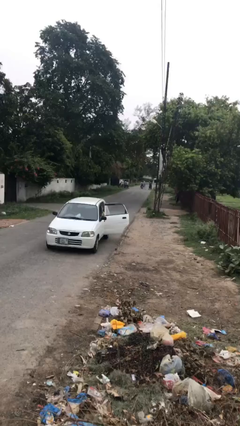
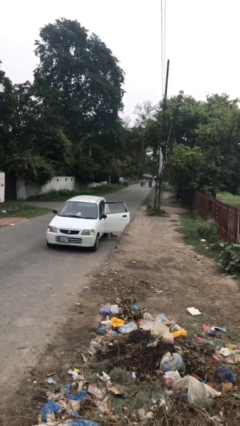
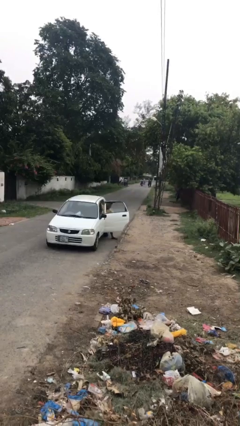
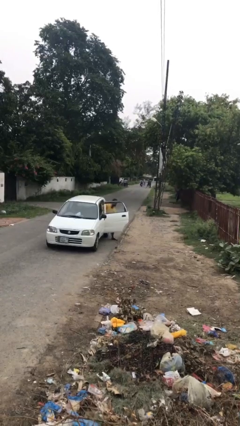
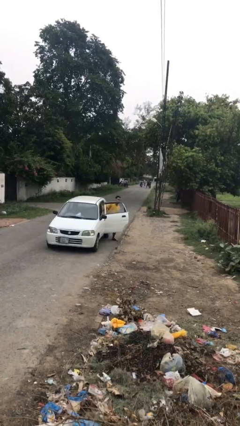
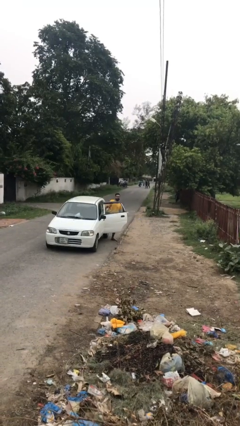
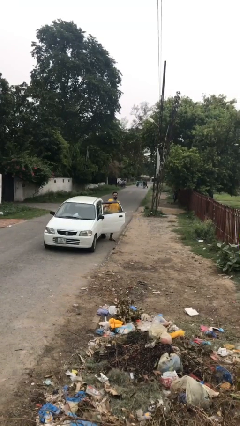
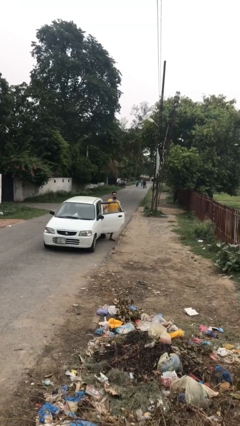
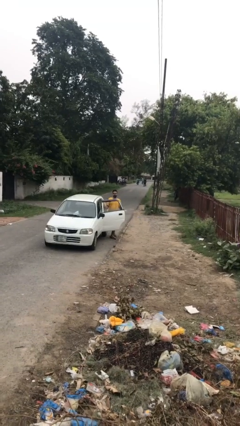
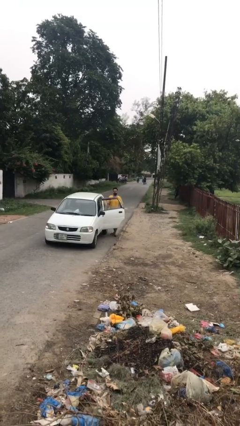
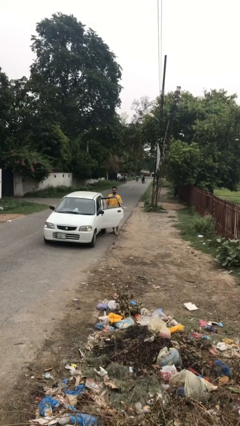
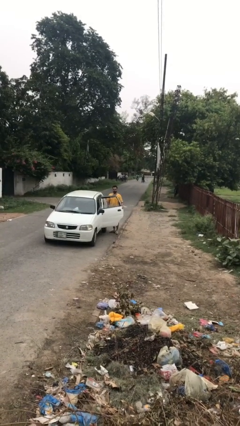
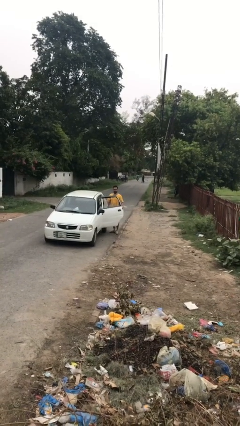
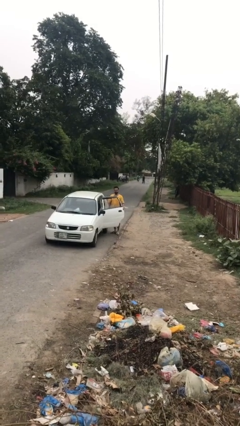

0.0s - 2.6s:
person exits car

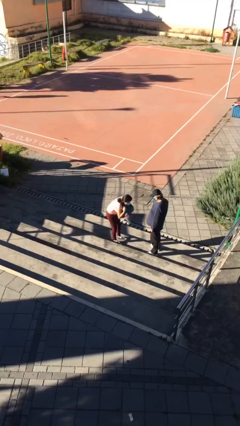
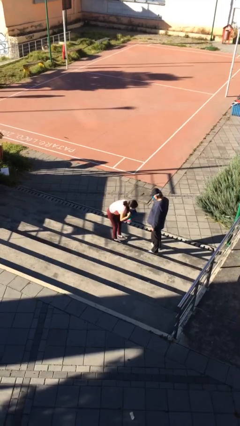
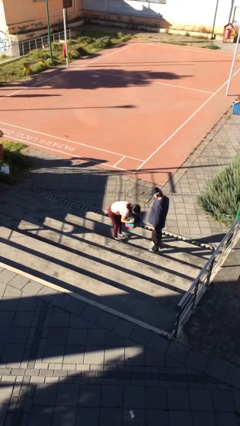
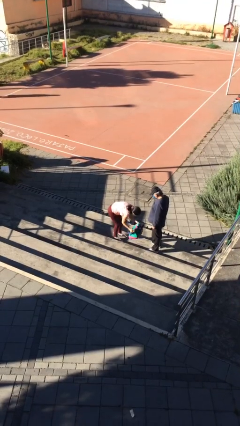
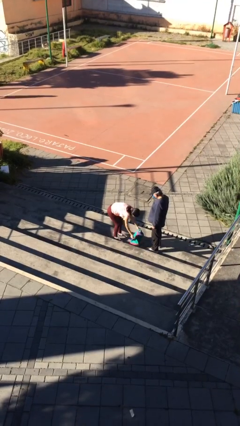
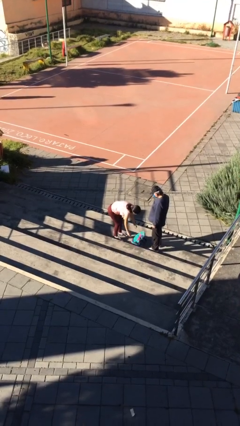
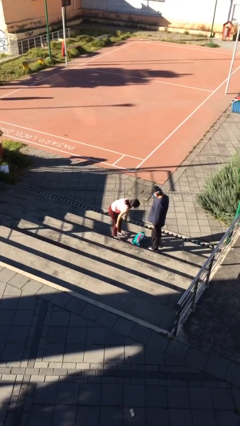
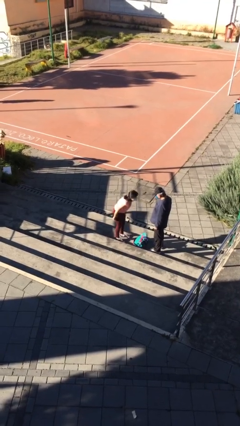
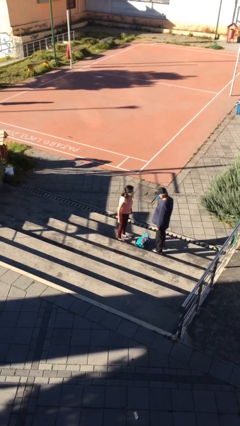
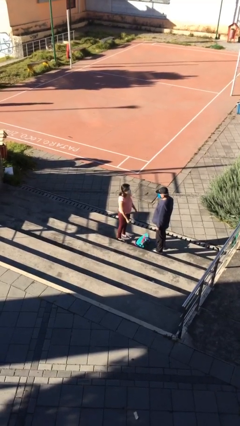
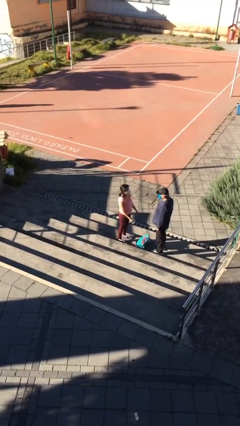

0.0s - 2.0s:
person puts down object on floor

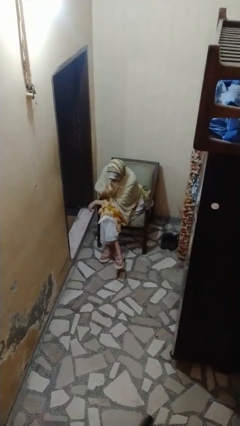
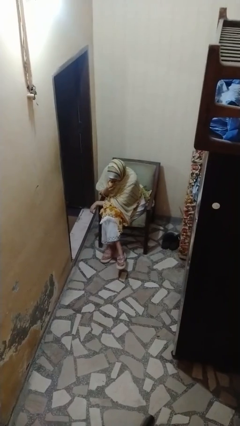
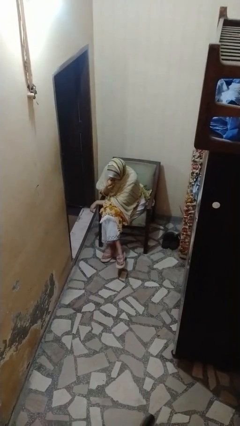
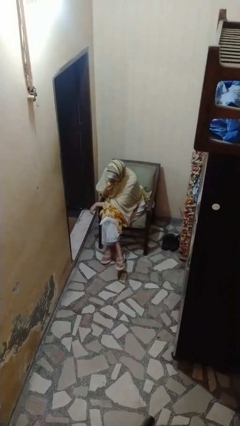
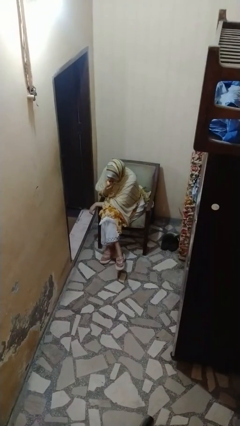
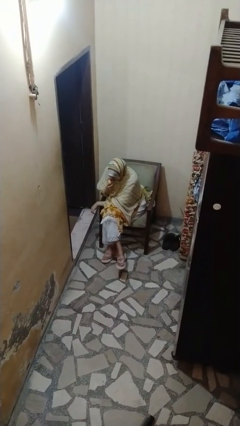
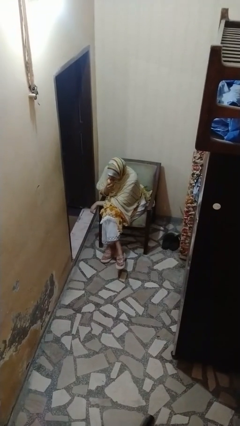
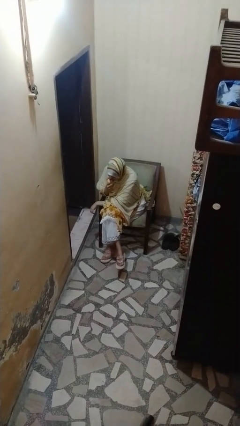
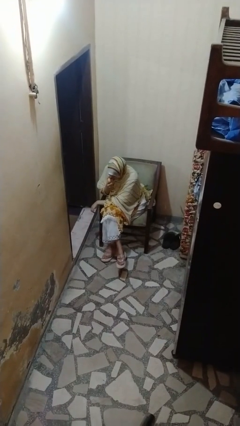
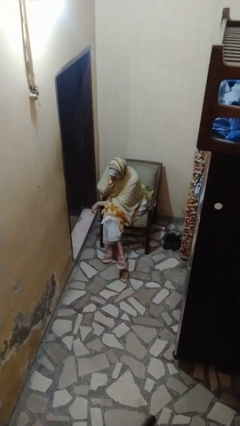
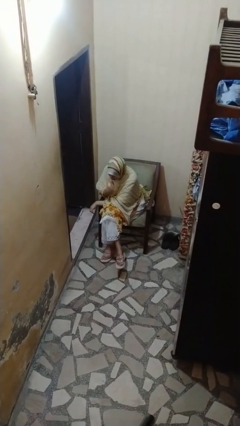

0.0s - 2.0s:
person eats apple

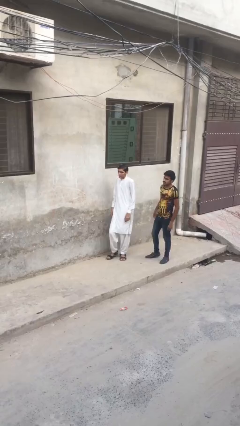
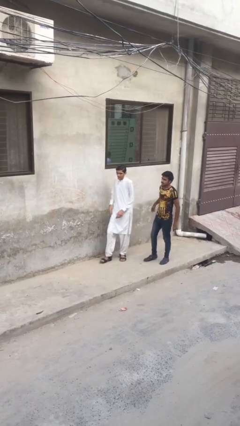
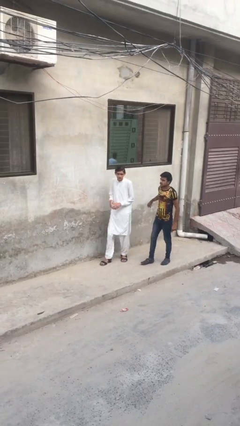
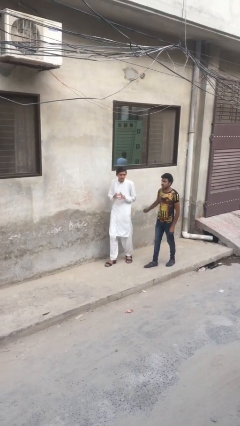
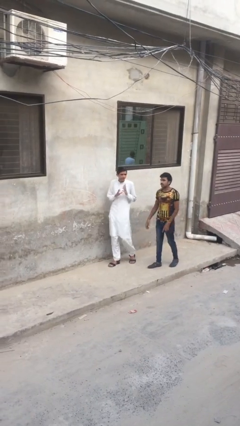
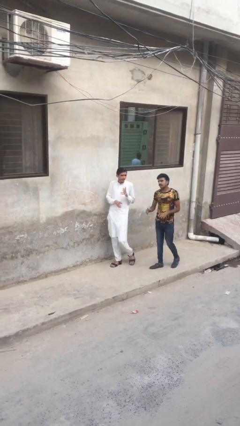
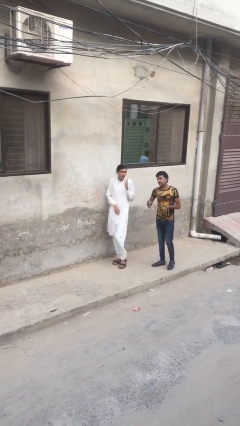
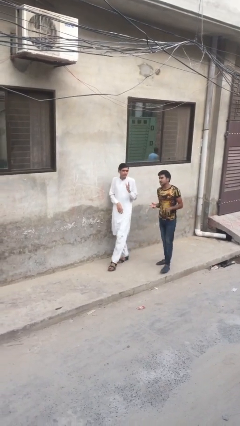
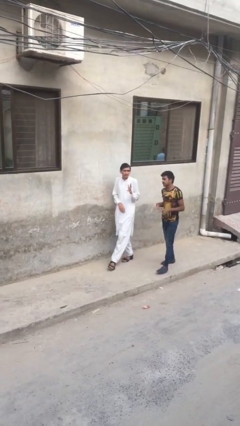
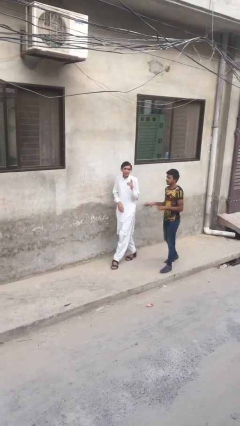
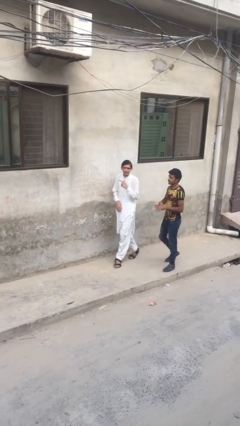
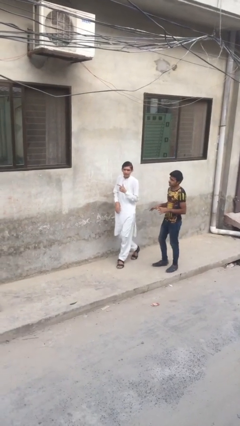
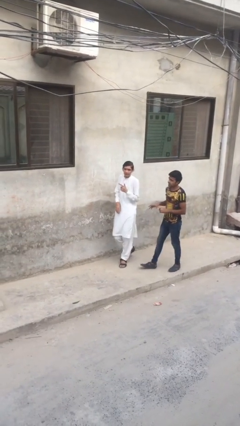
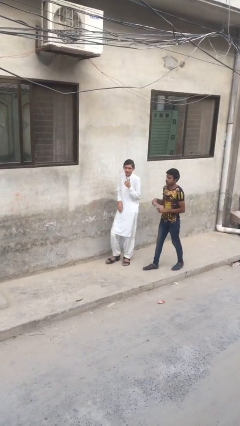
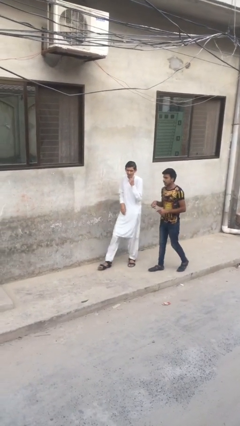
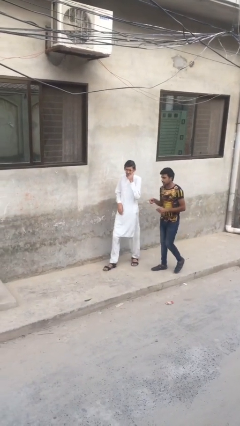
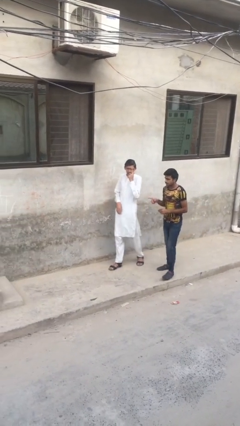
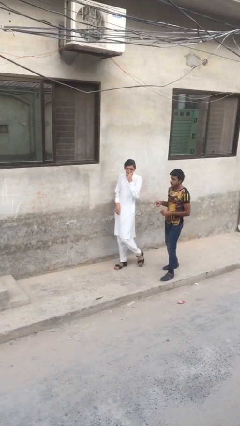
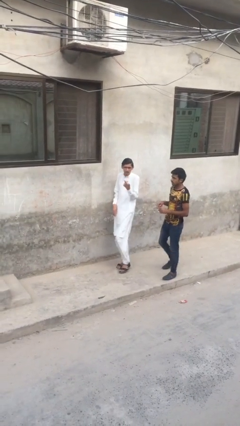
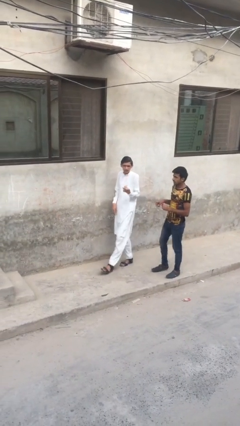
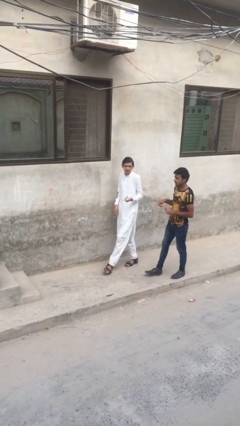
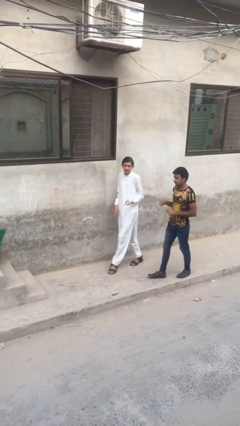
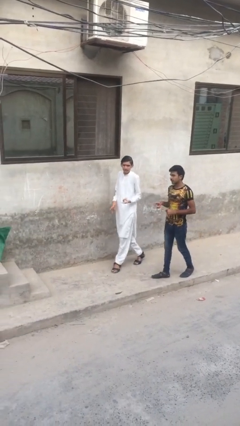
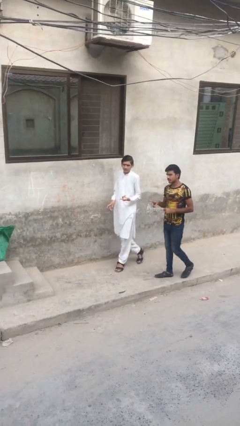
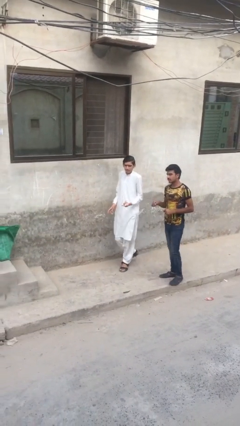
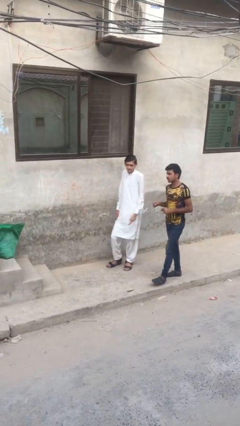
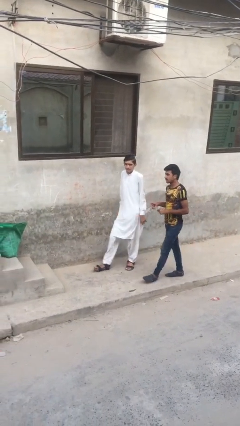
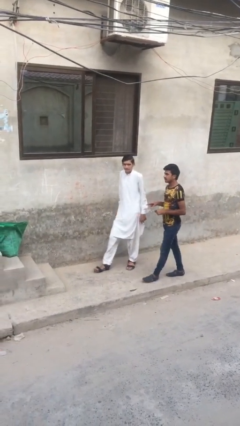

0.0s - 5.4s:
person talks to person

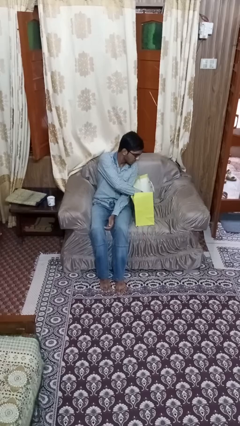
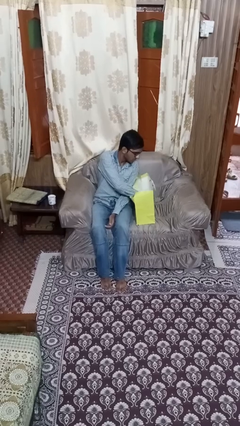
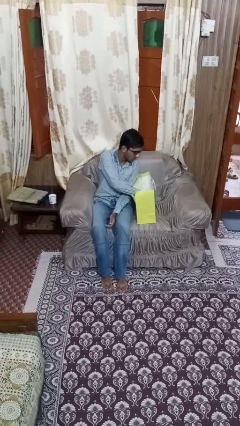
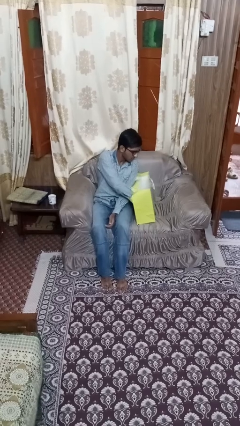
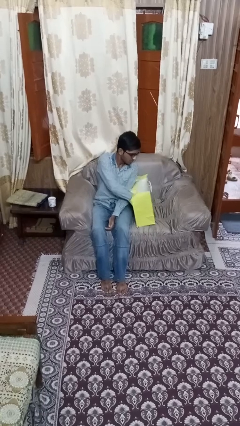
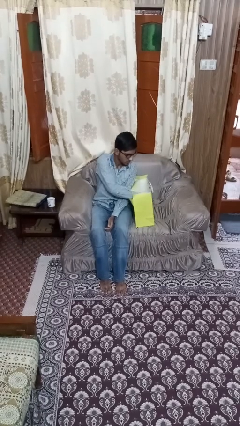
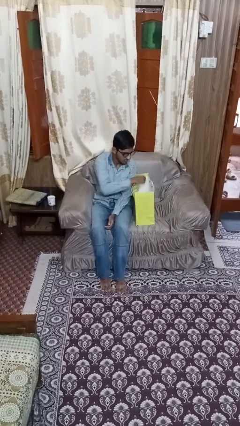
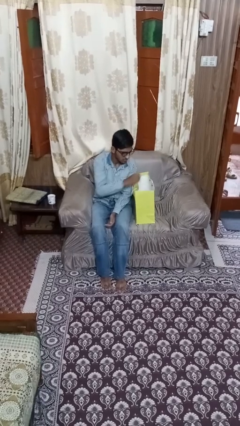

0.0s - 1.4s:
person searches in bag

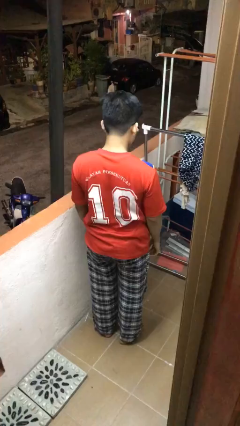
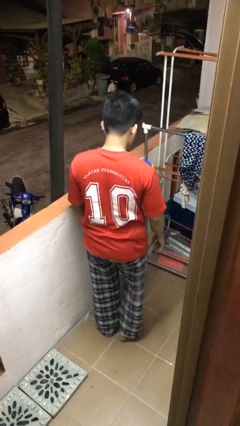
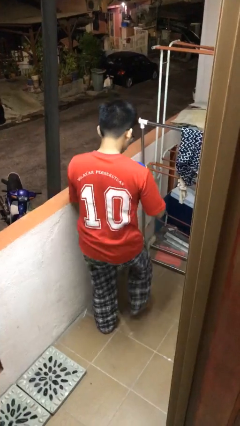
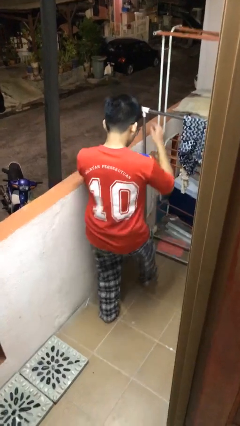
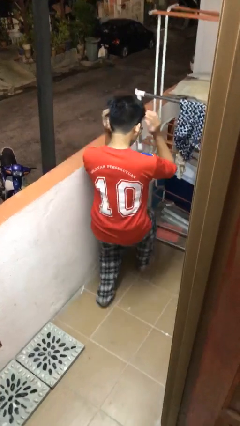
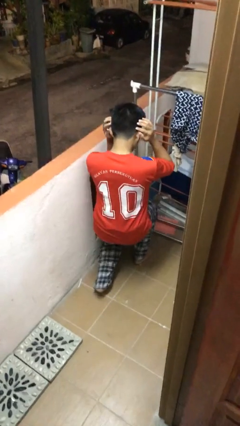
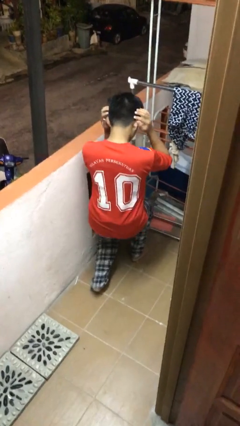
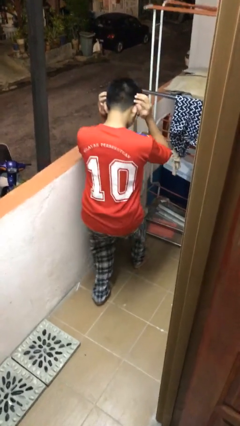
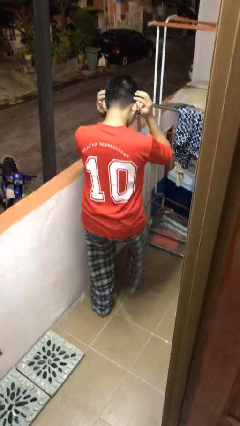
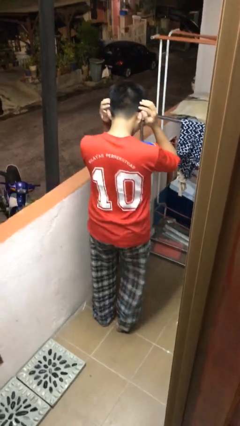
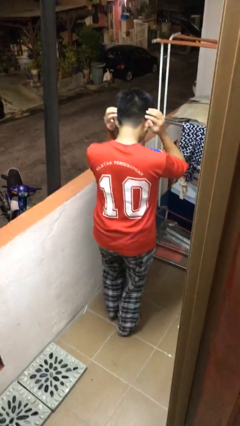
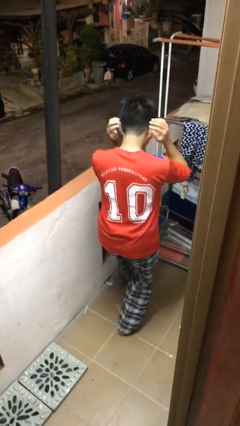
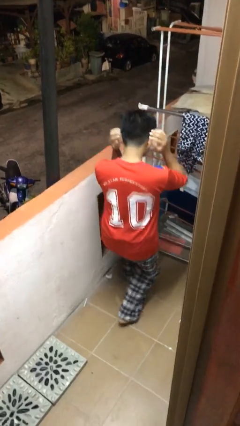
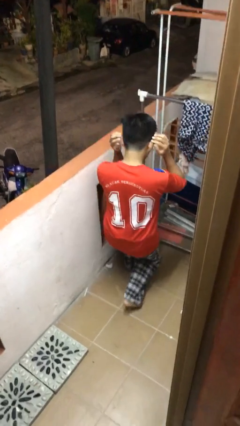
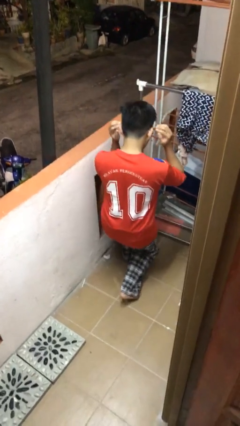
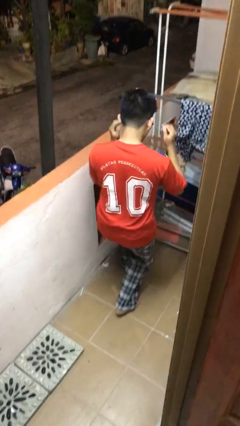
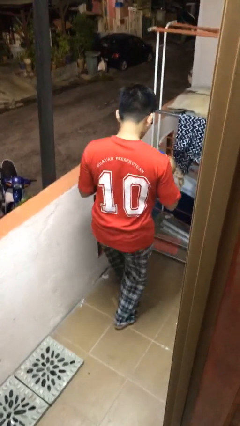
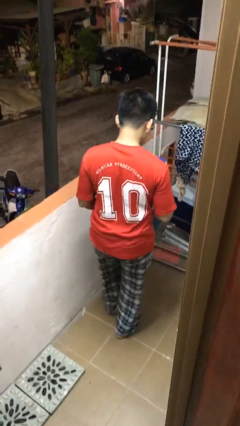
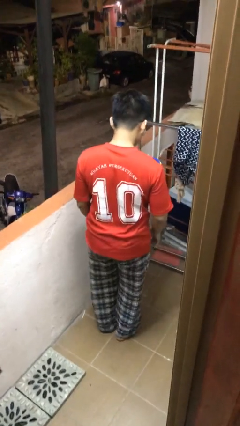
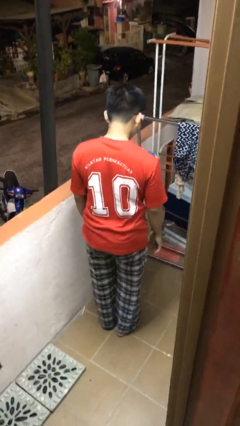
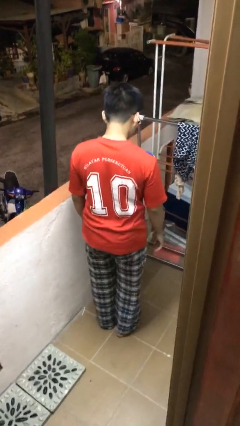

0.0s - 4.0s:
person exercises with lunges
